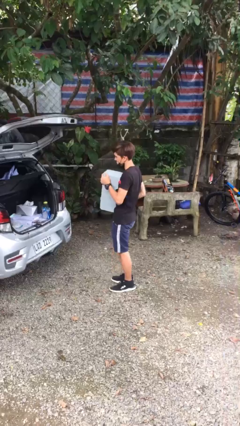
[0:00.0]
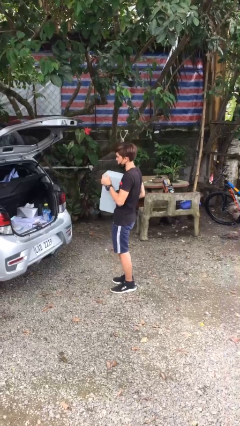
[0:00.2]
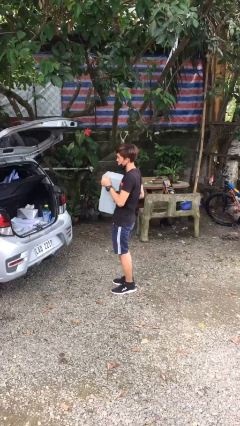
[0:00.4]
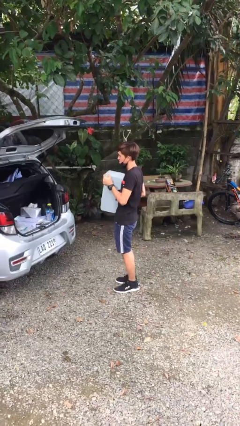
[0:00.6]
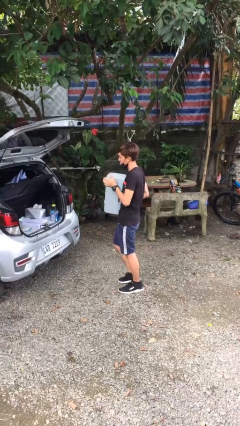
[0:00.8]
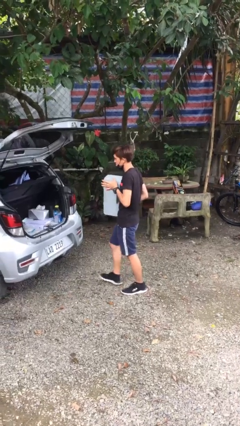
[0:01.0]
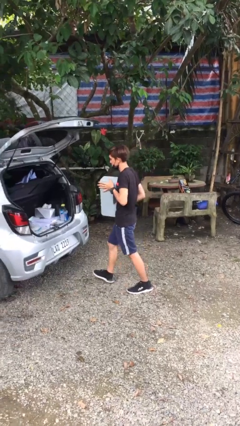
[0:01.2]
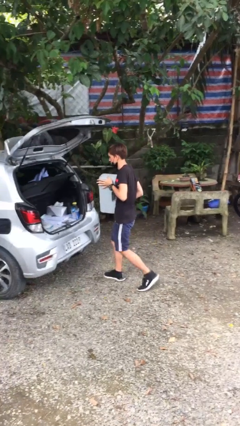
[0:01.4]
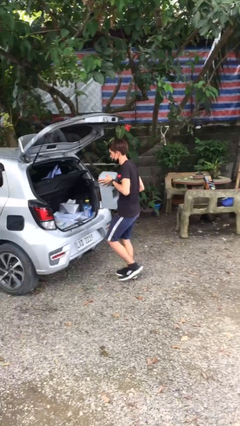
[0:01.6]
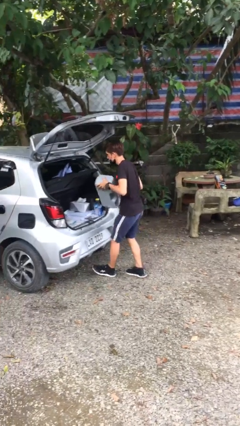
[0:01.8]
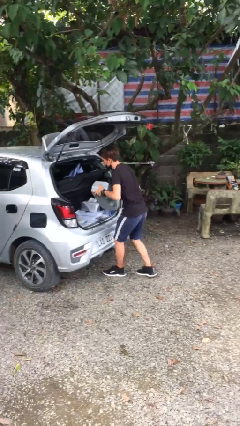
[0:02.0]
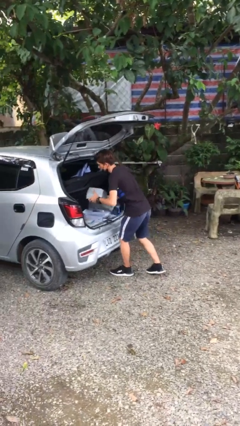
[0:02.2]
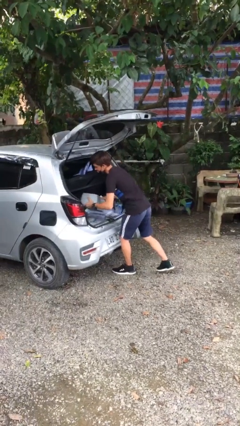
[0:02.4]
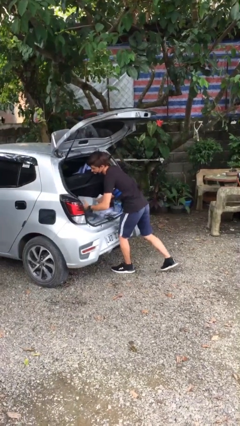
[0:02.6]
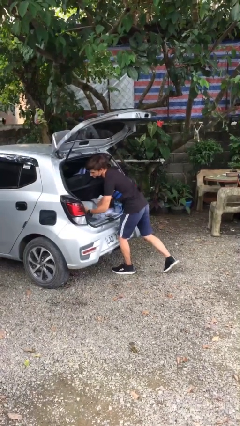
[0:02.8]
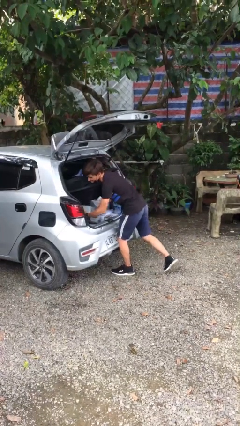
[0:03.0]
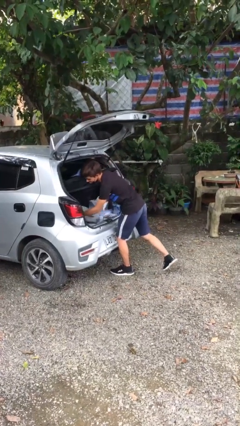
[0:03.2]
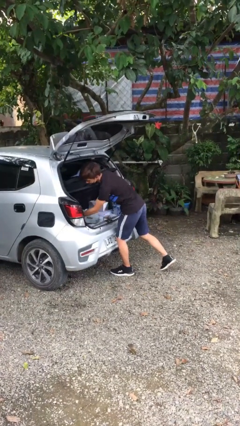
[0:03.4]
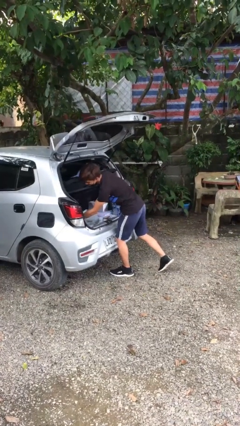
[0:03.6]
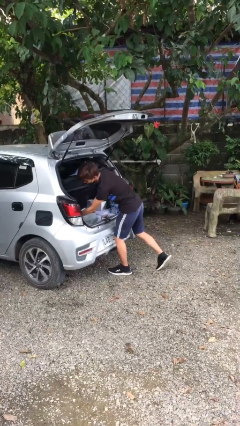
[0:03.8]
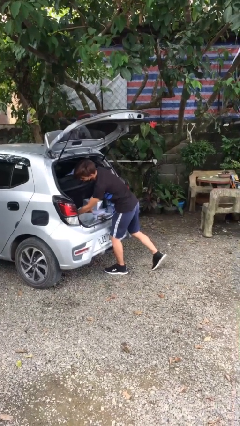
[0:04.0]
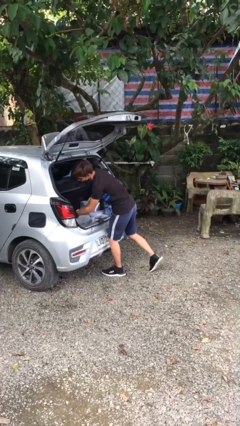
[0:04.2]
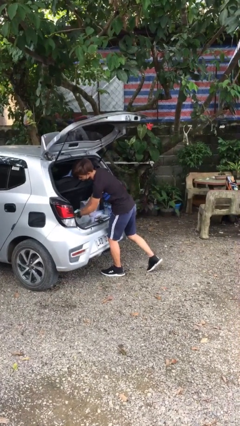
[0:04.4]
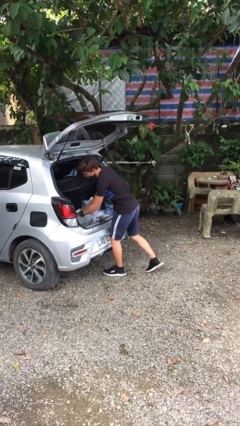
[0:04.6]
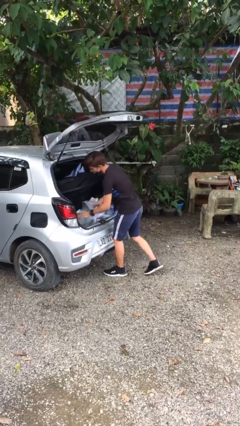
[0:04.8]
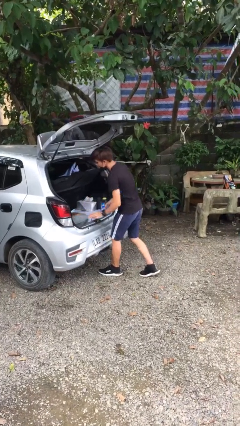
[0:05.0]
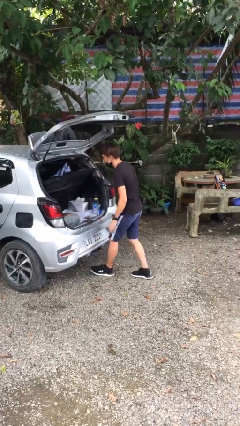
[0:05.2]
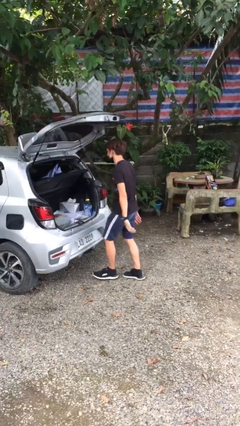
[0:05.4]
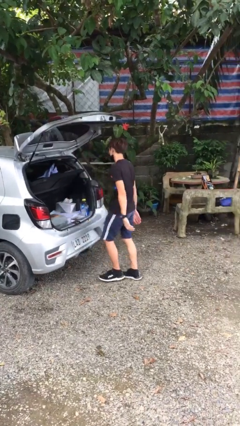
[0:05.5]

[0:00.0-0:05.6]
person loads car

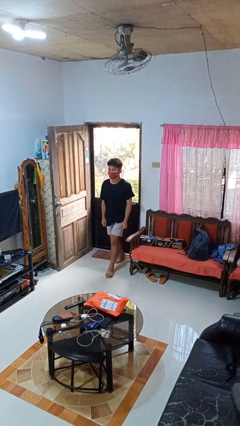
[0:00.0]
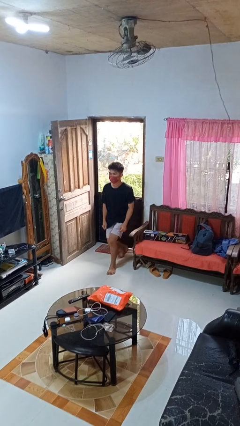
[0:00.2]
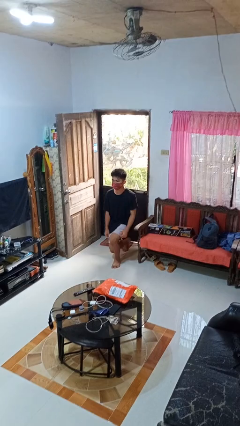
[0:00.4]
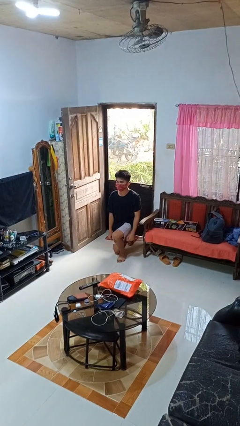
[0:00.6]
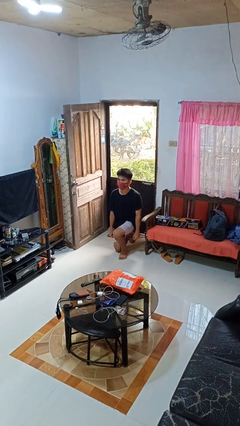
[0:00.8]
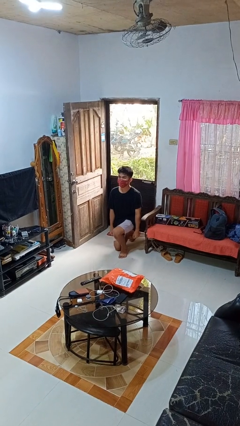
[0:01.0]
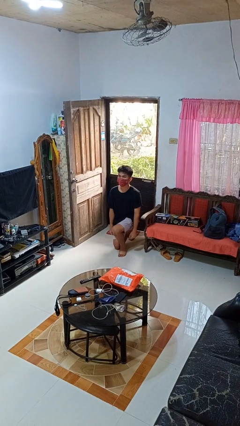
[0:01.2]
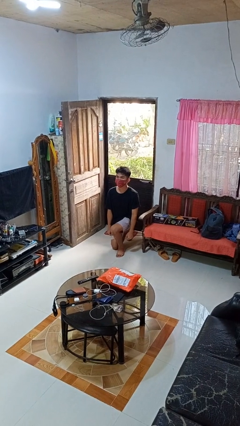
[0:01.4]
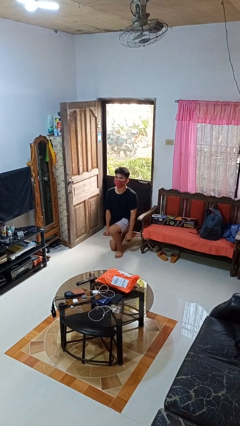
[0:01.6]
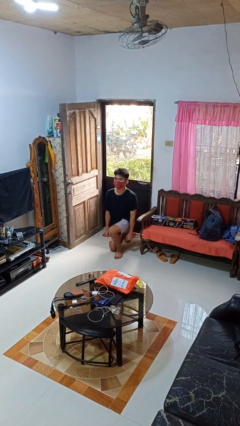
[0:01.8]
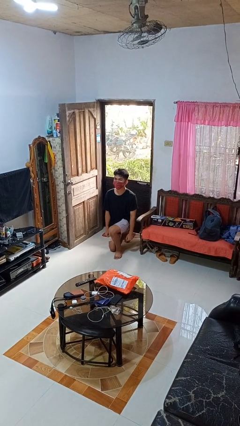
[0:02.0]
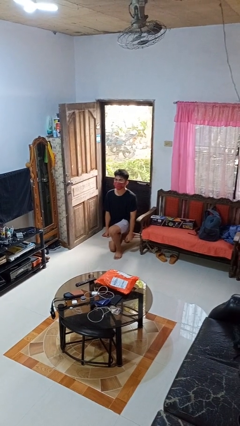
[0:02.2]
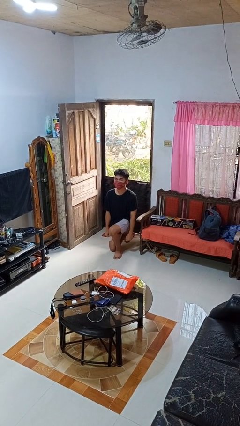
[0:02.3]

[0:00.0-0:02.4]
person kneels

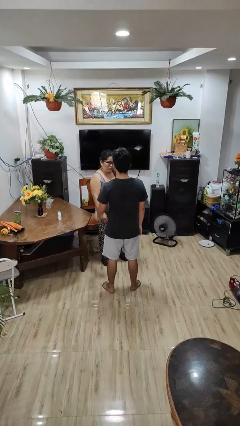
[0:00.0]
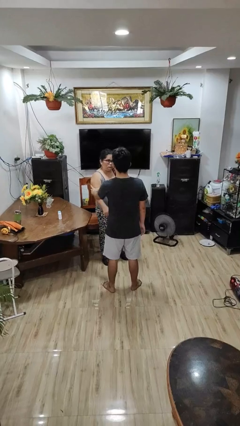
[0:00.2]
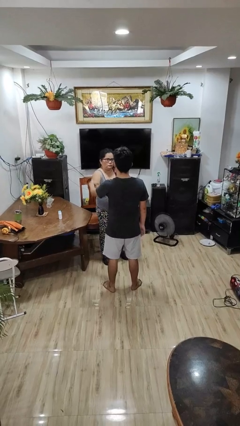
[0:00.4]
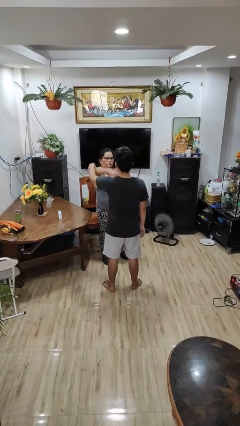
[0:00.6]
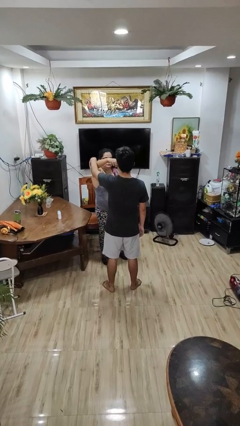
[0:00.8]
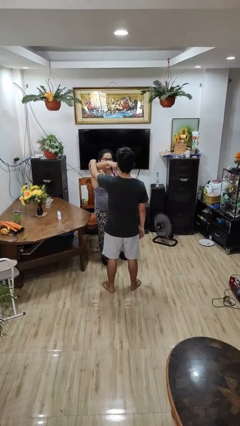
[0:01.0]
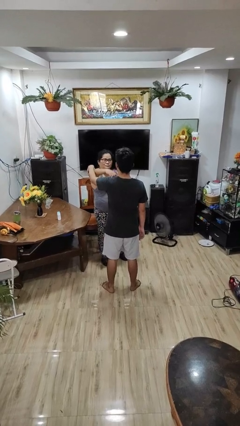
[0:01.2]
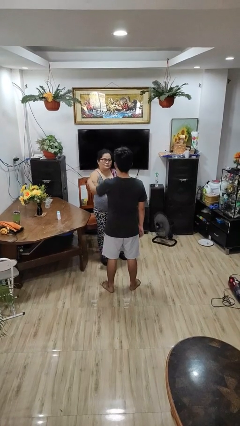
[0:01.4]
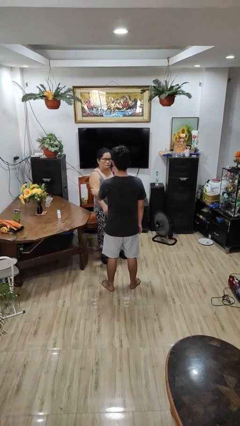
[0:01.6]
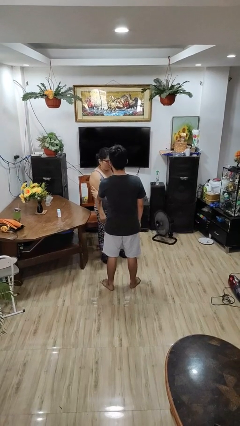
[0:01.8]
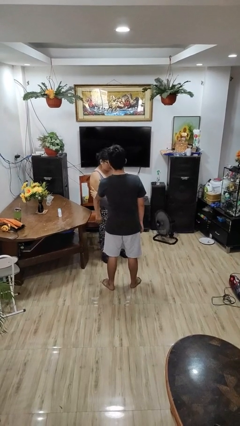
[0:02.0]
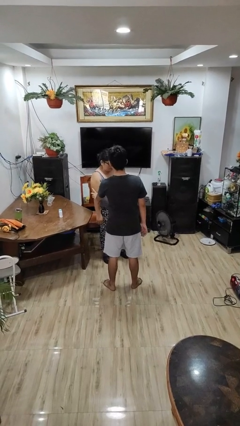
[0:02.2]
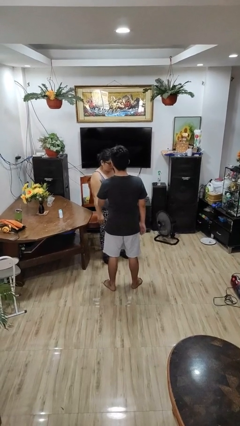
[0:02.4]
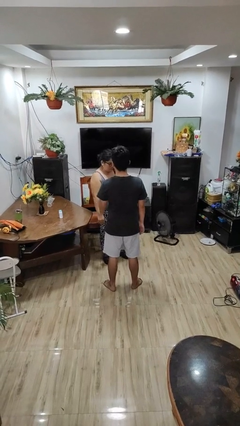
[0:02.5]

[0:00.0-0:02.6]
person grabs person by bicep

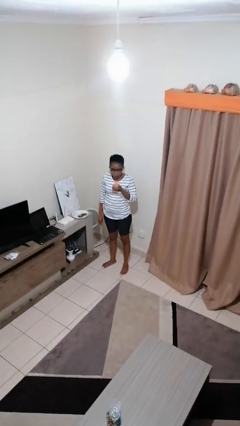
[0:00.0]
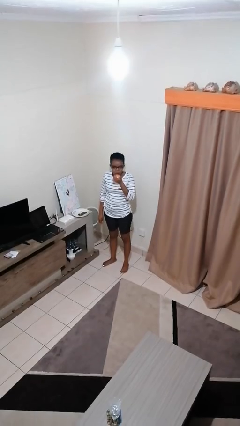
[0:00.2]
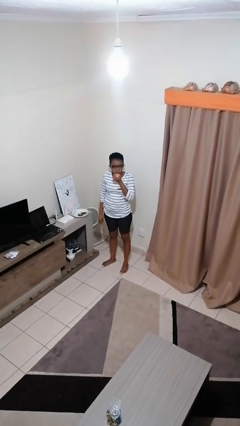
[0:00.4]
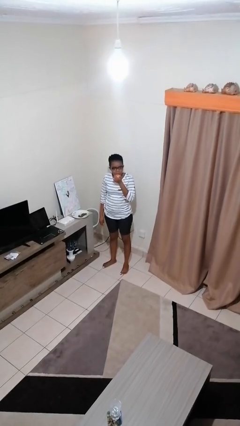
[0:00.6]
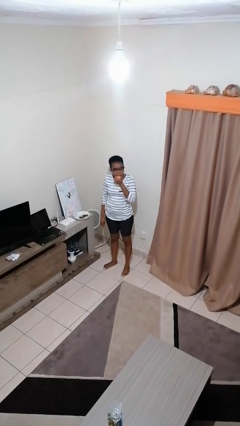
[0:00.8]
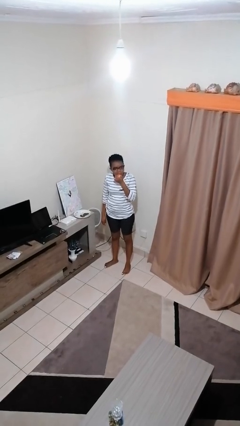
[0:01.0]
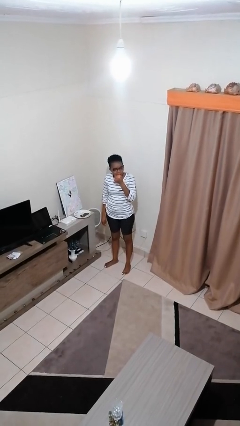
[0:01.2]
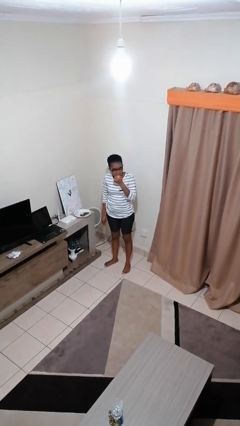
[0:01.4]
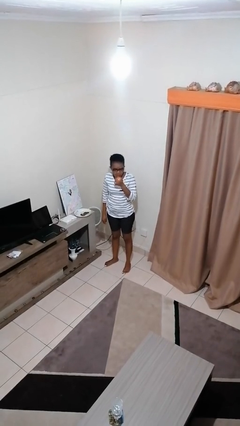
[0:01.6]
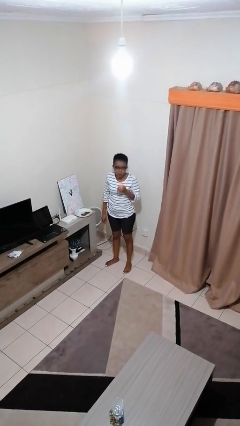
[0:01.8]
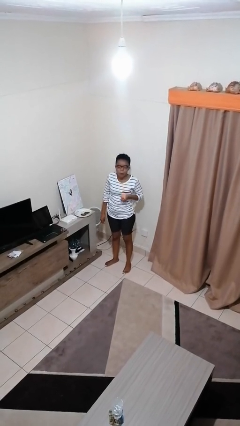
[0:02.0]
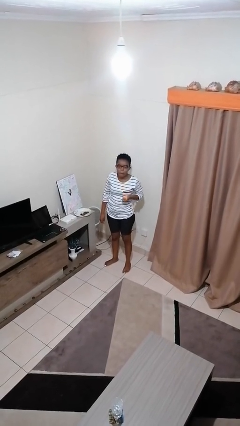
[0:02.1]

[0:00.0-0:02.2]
person eats apple

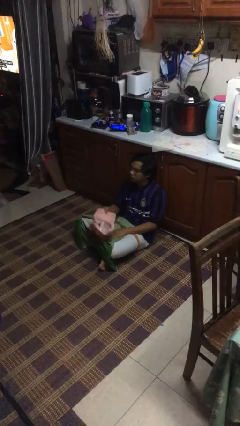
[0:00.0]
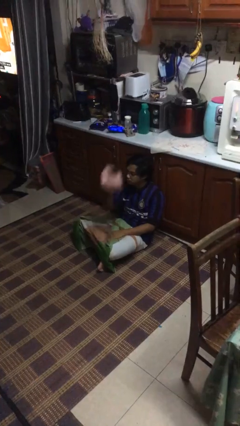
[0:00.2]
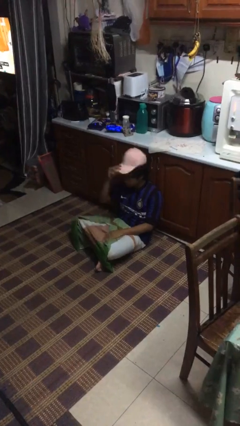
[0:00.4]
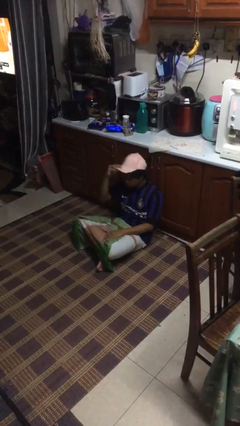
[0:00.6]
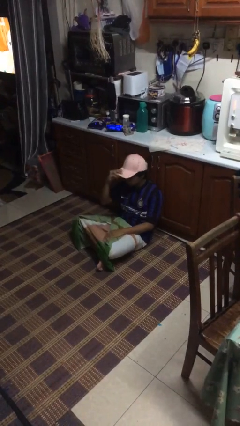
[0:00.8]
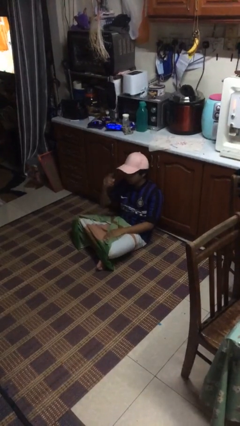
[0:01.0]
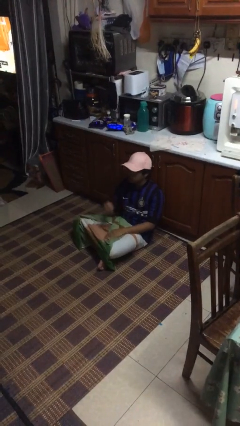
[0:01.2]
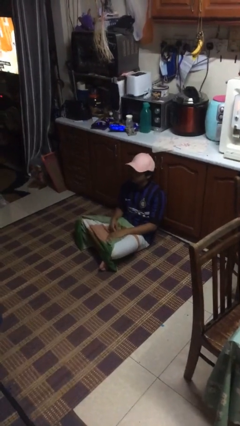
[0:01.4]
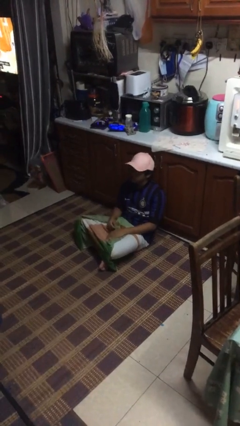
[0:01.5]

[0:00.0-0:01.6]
person puts on hat

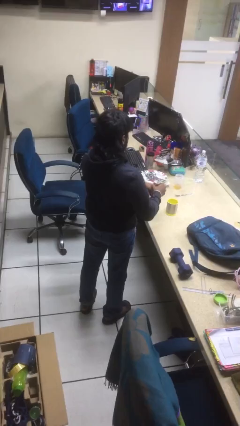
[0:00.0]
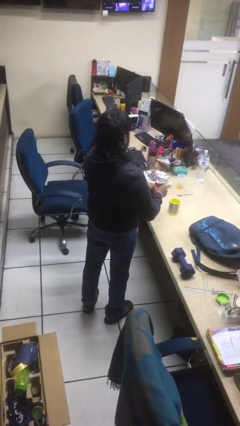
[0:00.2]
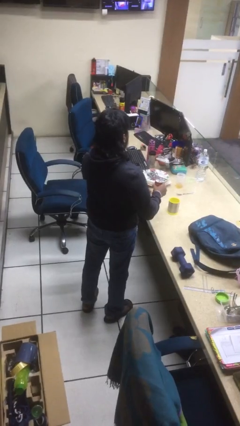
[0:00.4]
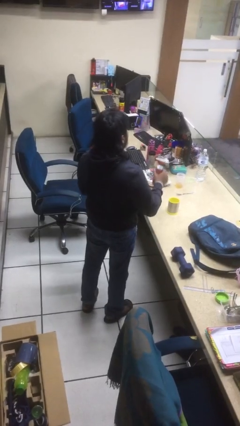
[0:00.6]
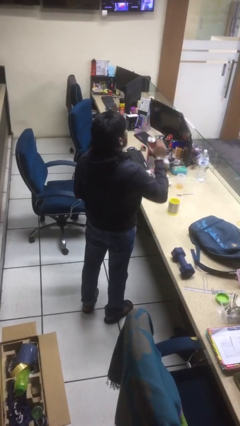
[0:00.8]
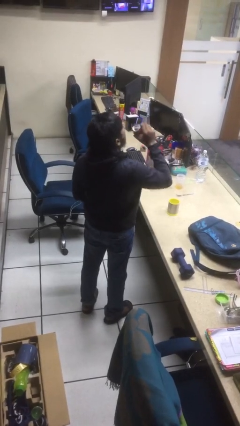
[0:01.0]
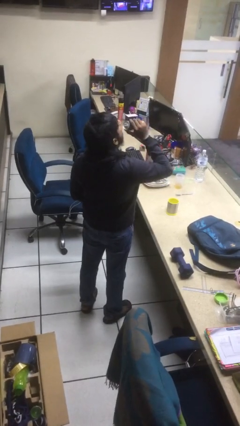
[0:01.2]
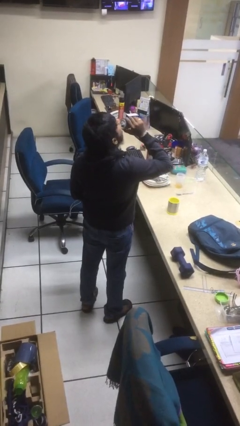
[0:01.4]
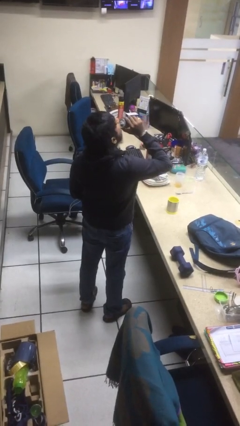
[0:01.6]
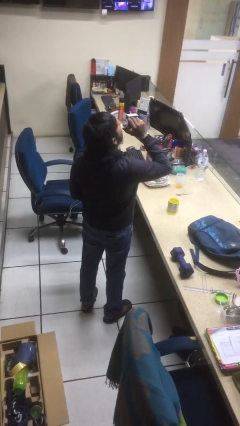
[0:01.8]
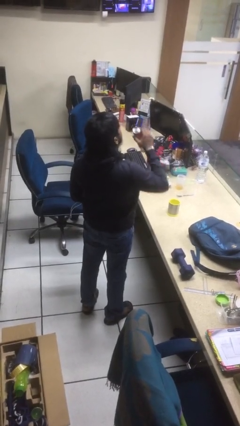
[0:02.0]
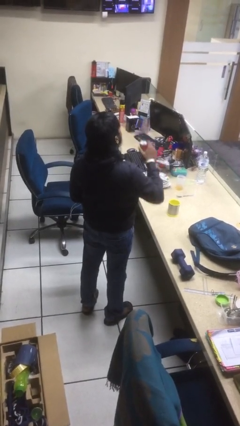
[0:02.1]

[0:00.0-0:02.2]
person drinks from beverage can

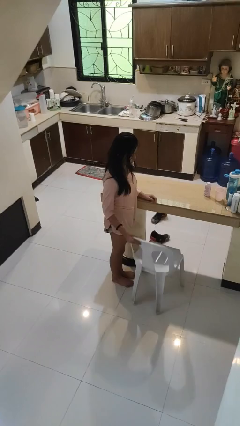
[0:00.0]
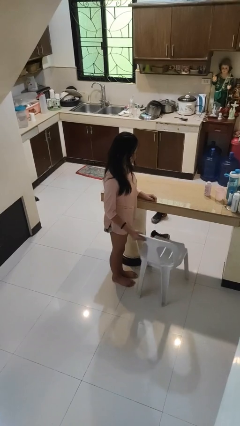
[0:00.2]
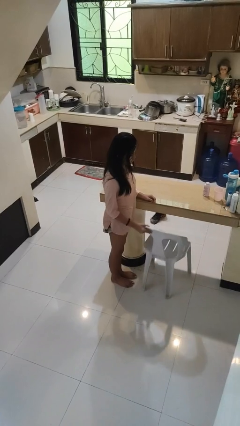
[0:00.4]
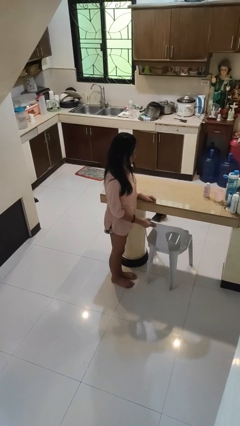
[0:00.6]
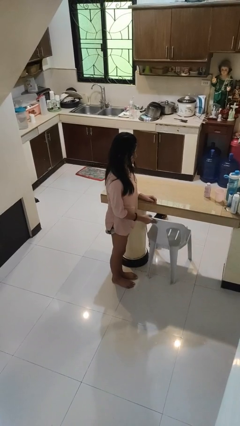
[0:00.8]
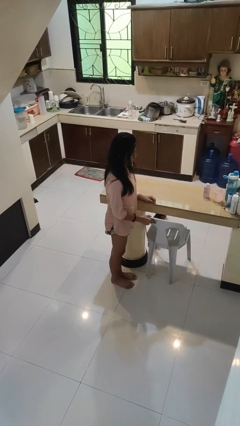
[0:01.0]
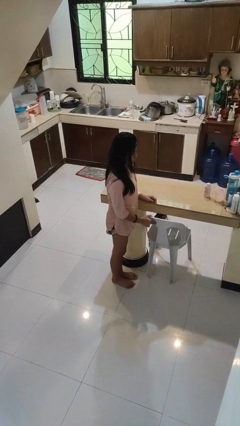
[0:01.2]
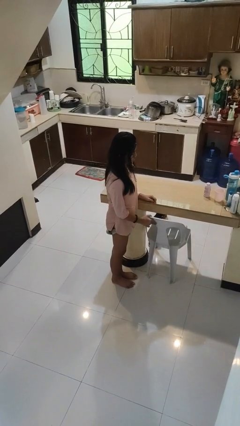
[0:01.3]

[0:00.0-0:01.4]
person pushes in chair
